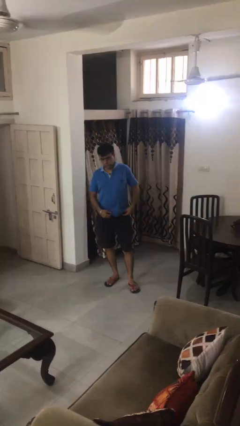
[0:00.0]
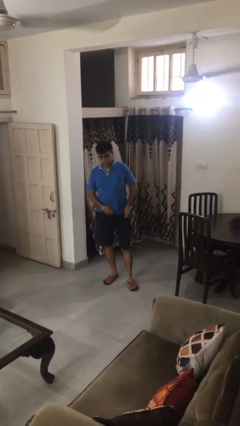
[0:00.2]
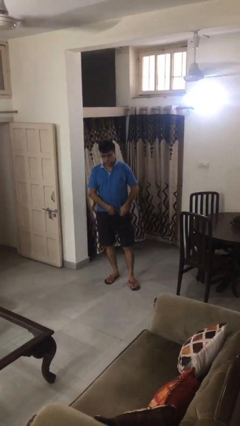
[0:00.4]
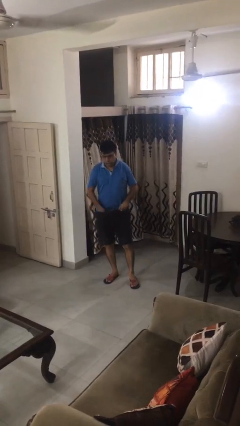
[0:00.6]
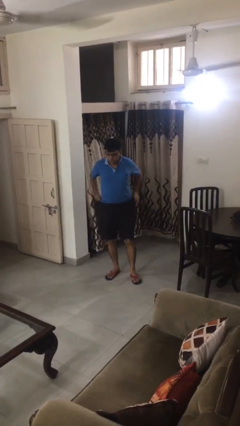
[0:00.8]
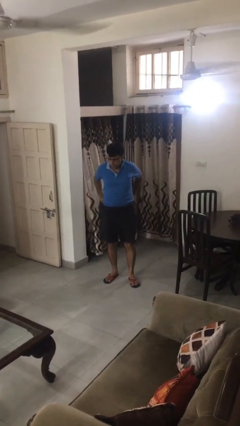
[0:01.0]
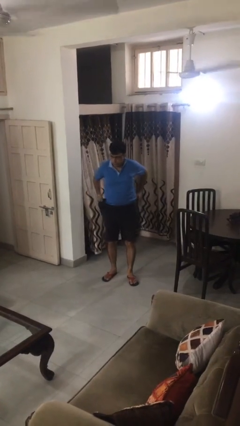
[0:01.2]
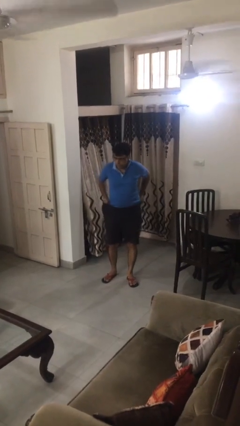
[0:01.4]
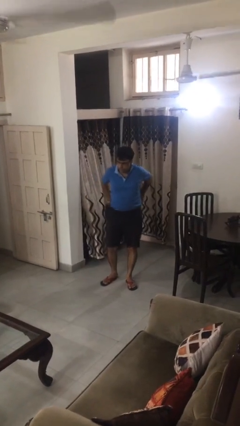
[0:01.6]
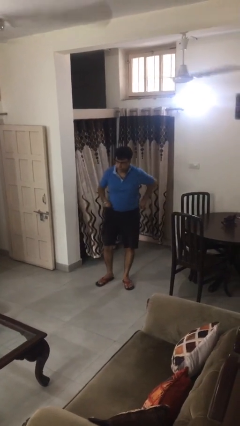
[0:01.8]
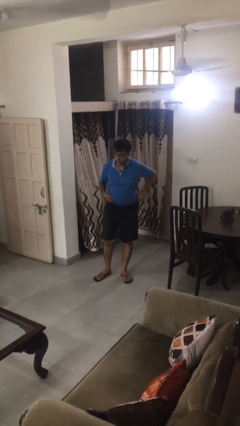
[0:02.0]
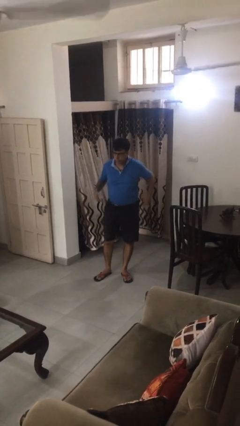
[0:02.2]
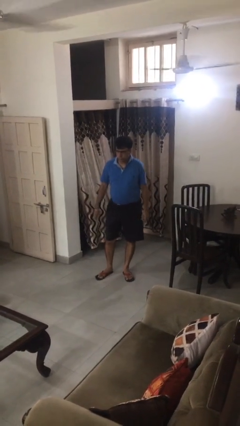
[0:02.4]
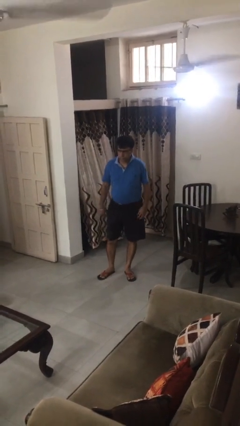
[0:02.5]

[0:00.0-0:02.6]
person tucks in shirt

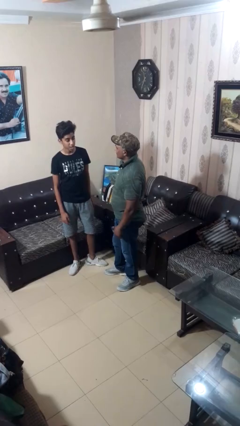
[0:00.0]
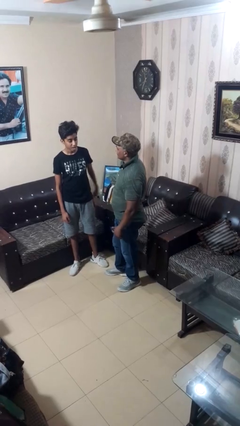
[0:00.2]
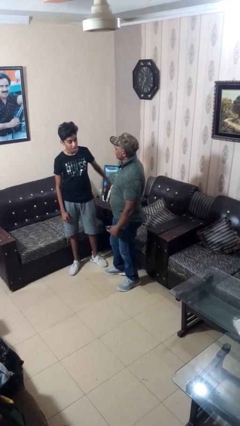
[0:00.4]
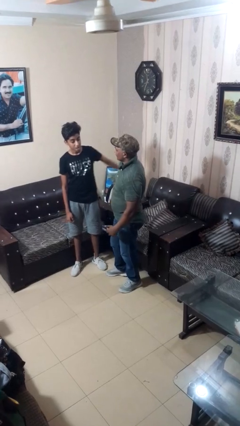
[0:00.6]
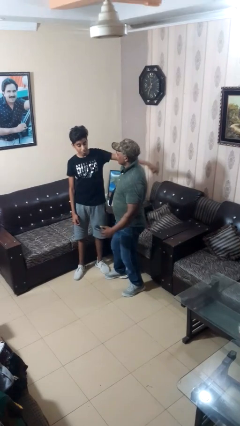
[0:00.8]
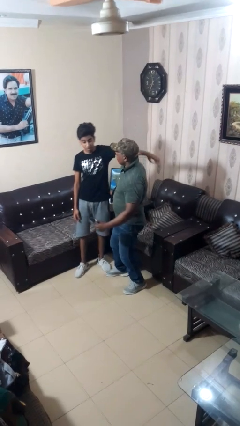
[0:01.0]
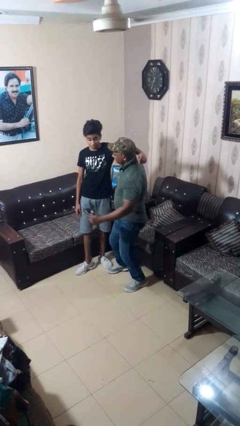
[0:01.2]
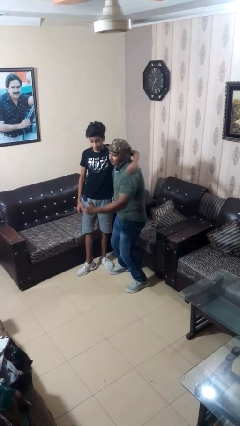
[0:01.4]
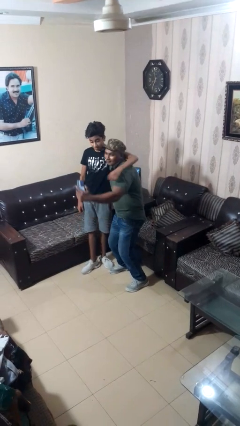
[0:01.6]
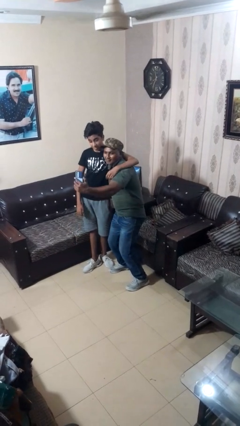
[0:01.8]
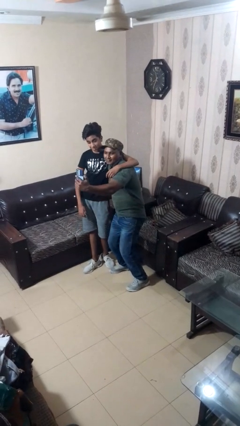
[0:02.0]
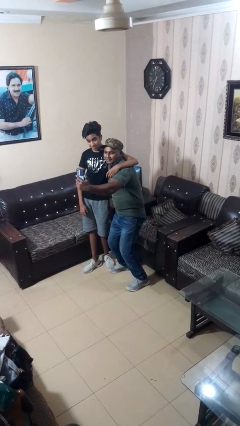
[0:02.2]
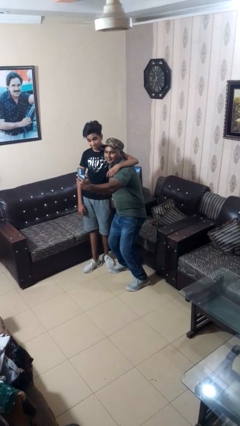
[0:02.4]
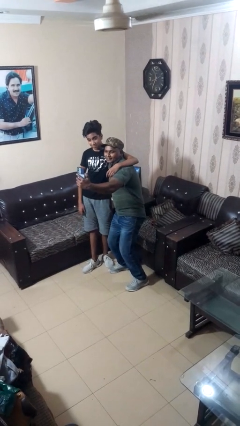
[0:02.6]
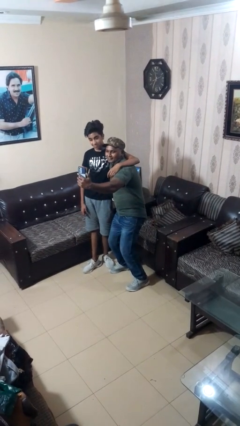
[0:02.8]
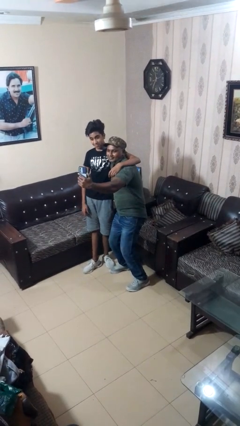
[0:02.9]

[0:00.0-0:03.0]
person takes selfie with person

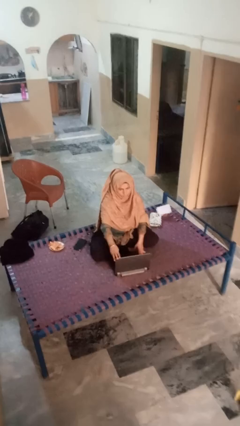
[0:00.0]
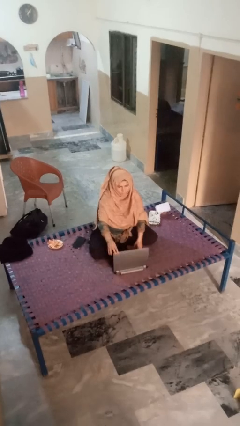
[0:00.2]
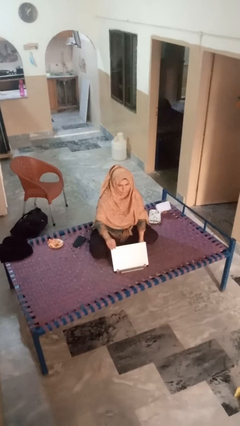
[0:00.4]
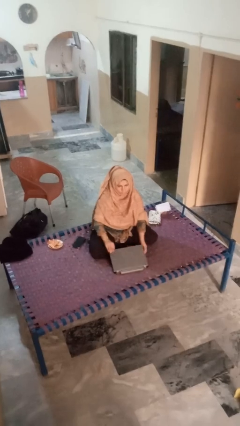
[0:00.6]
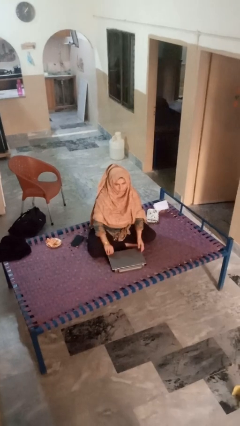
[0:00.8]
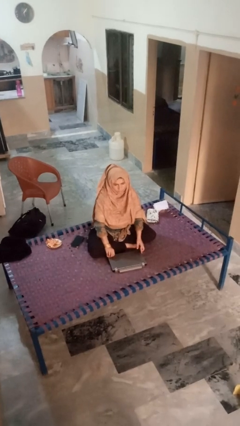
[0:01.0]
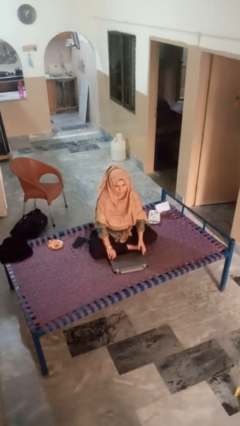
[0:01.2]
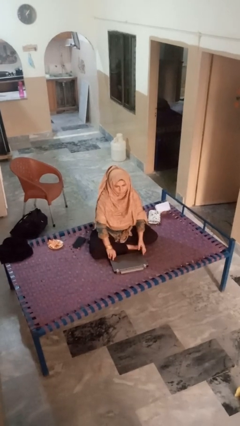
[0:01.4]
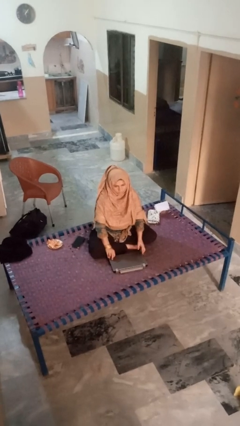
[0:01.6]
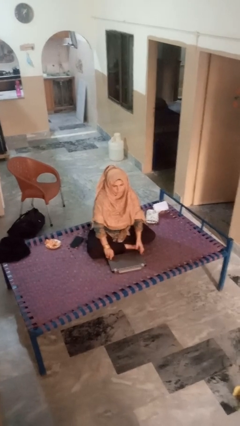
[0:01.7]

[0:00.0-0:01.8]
person closes laptop

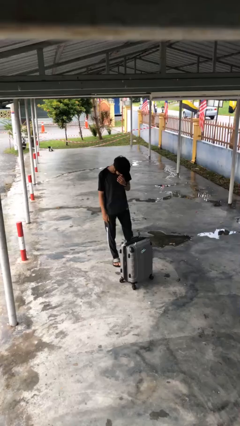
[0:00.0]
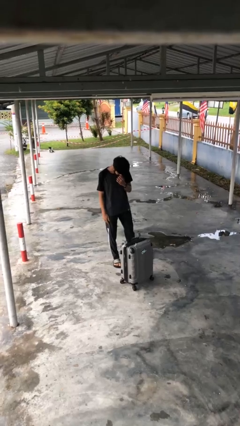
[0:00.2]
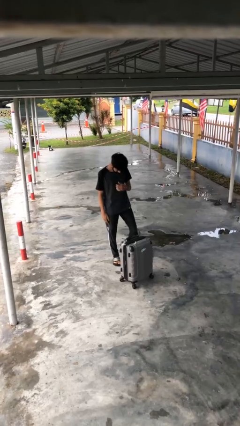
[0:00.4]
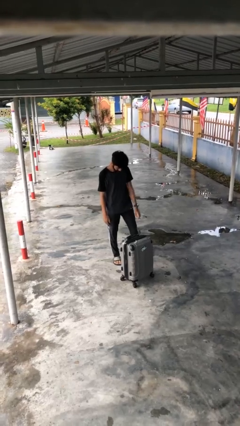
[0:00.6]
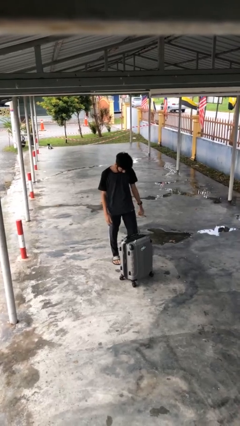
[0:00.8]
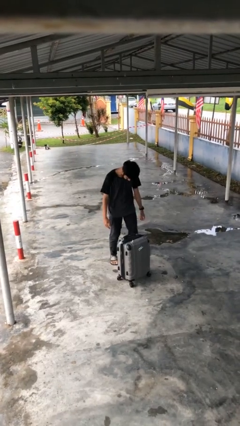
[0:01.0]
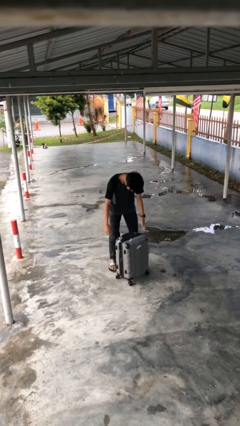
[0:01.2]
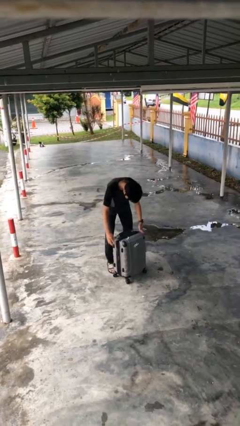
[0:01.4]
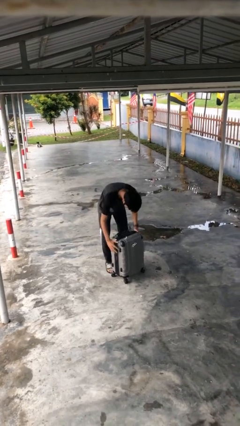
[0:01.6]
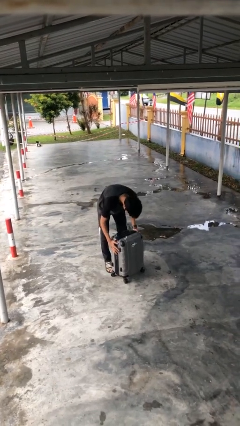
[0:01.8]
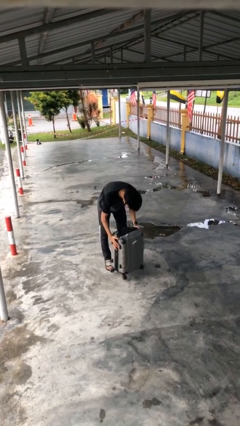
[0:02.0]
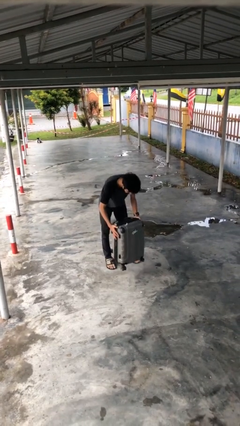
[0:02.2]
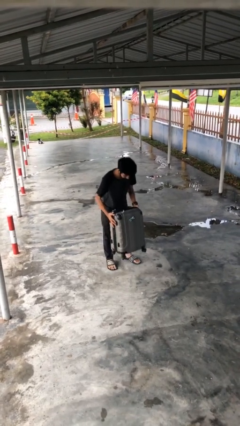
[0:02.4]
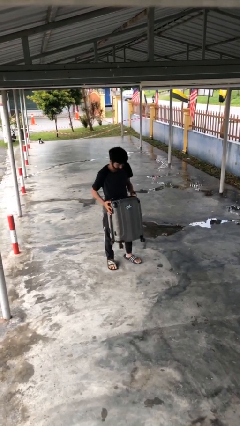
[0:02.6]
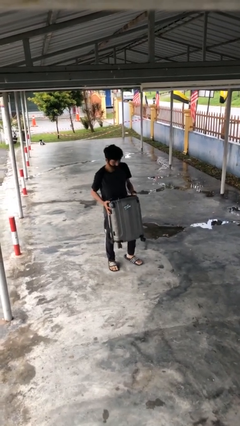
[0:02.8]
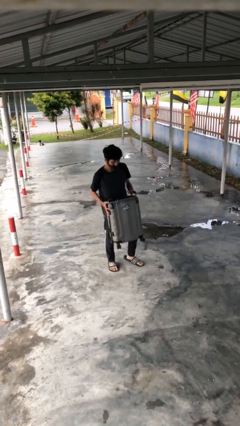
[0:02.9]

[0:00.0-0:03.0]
person picks up object from floor

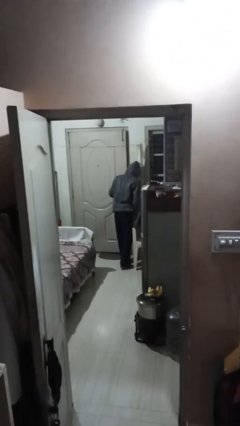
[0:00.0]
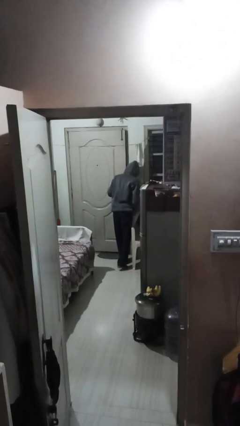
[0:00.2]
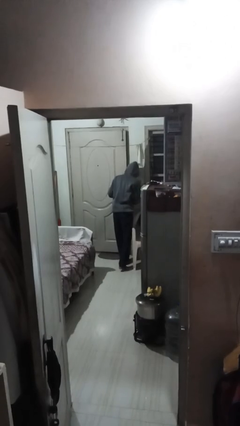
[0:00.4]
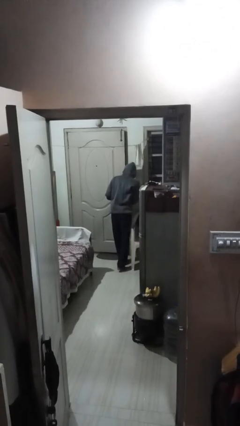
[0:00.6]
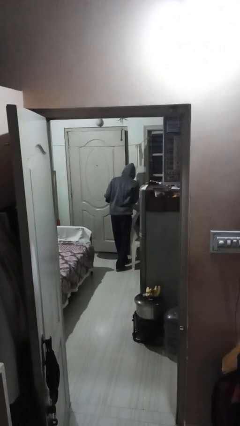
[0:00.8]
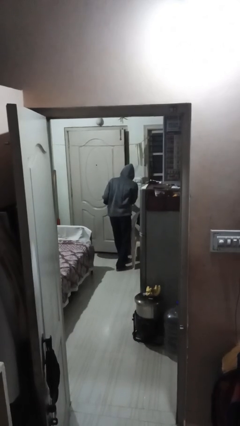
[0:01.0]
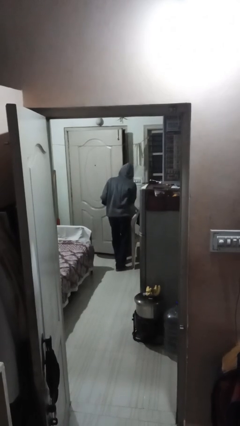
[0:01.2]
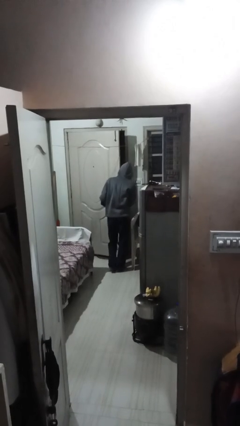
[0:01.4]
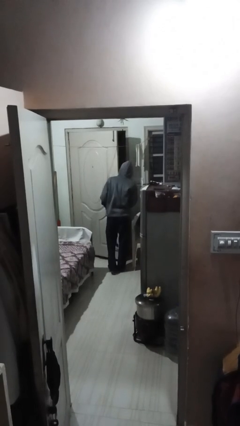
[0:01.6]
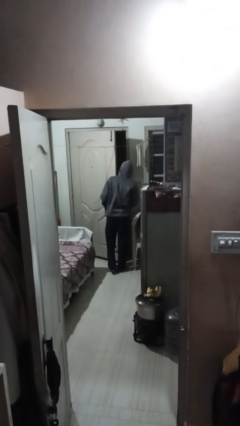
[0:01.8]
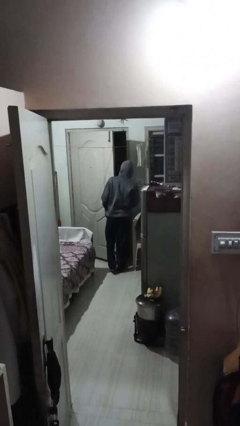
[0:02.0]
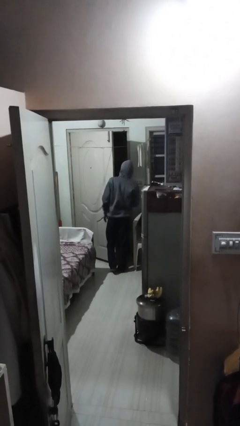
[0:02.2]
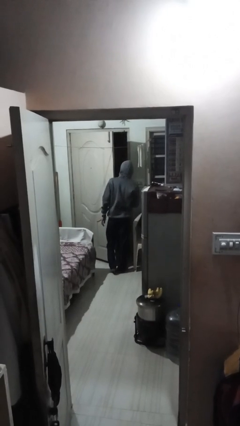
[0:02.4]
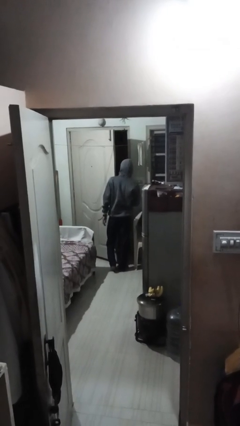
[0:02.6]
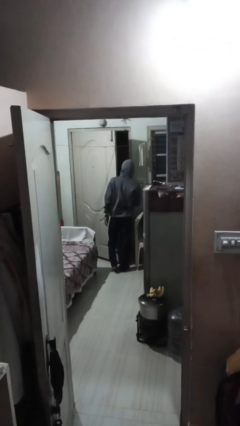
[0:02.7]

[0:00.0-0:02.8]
person opens facility door

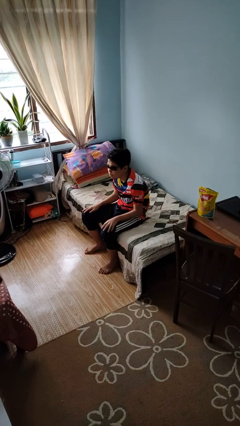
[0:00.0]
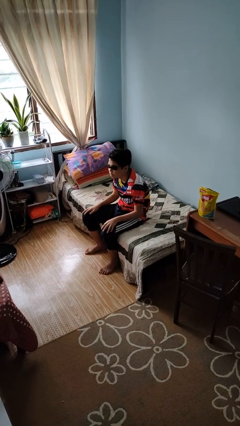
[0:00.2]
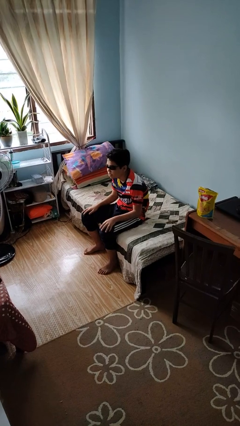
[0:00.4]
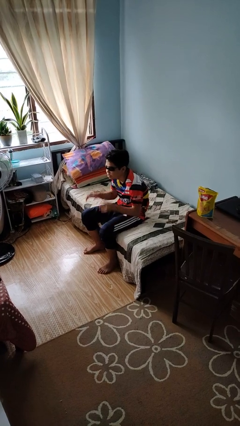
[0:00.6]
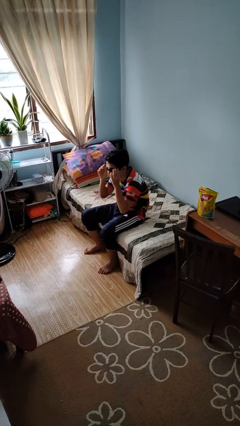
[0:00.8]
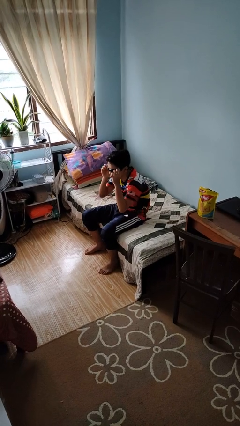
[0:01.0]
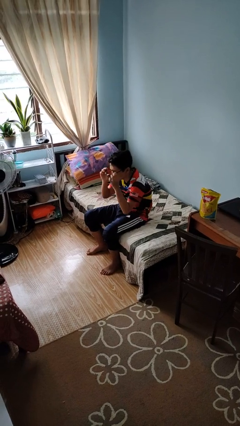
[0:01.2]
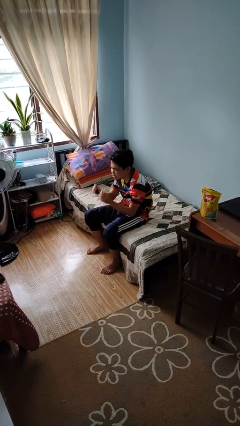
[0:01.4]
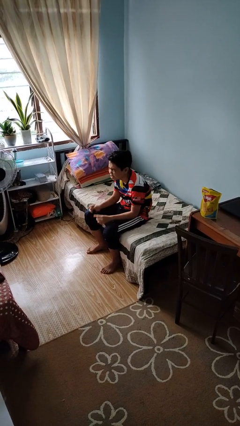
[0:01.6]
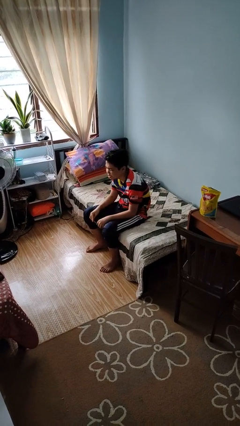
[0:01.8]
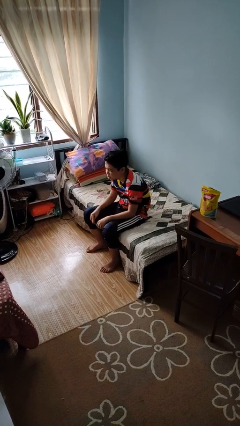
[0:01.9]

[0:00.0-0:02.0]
person takes off glasses

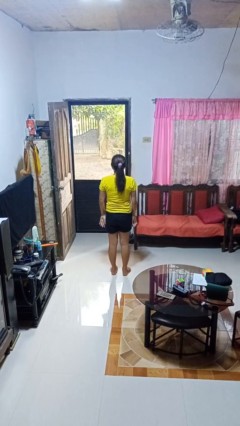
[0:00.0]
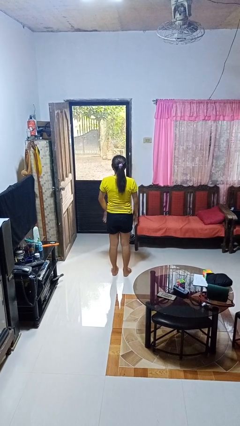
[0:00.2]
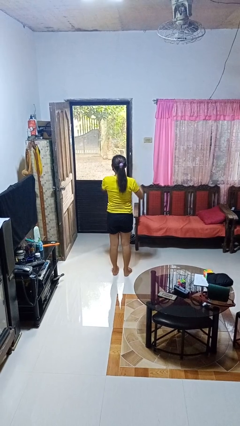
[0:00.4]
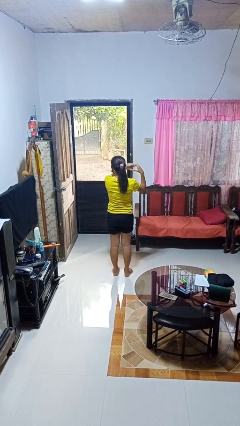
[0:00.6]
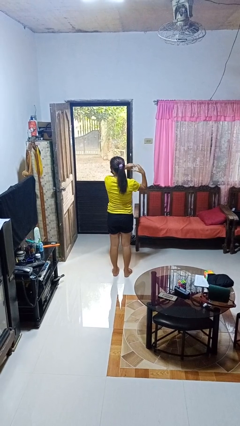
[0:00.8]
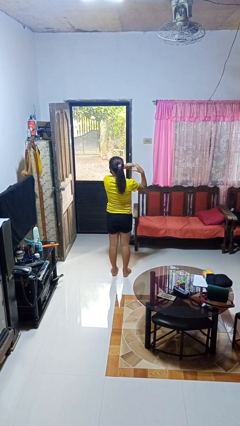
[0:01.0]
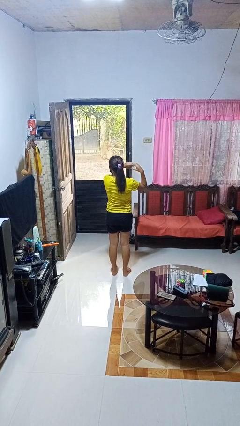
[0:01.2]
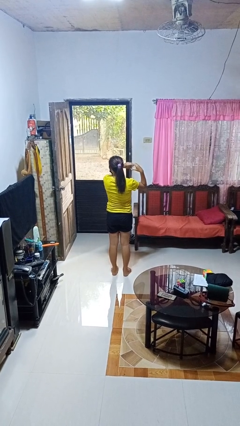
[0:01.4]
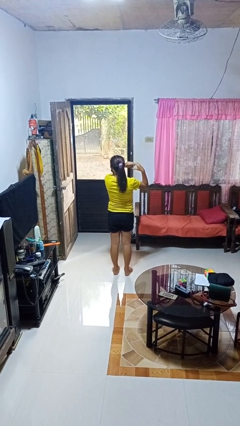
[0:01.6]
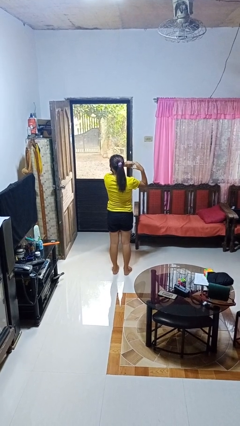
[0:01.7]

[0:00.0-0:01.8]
person gestures heart
